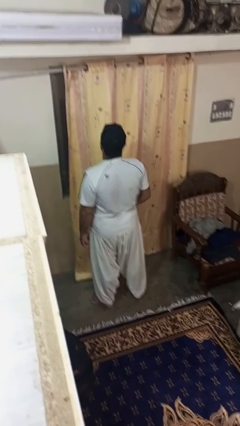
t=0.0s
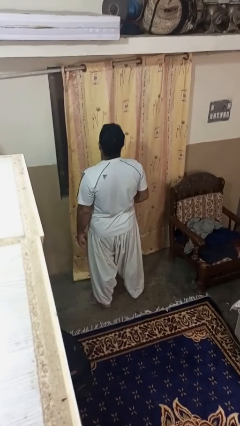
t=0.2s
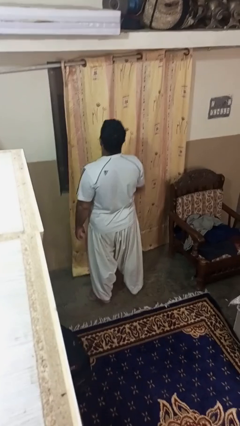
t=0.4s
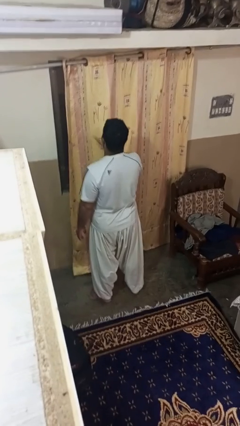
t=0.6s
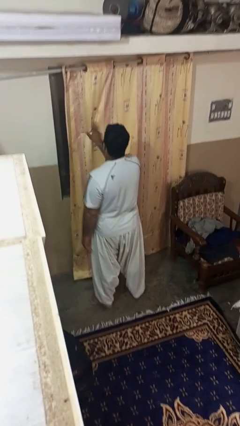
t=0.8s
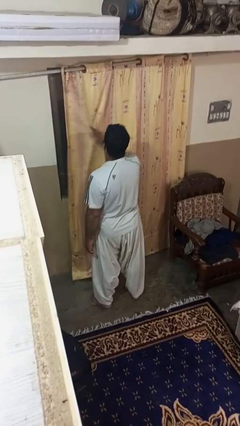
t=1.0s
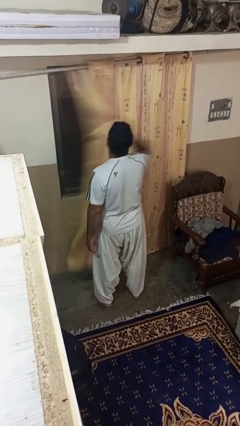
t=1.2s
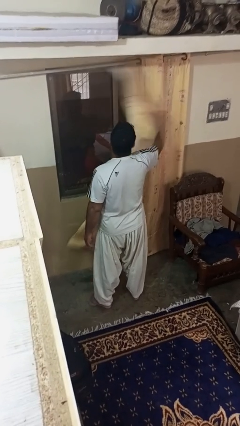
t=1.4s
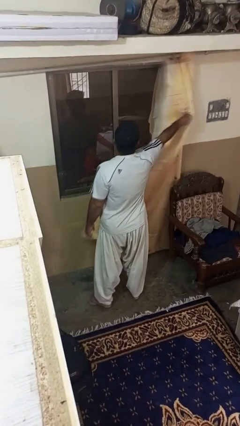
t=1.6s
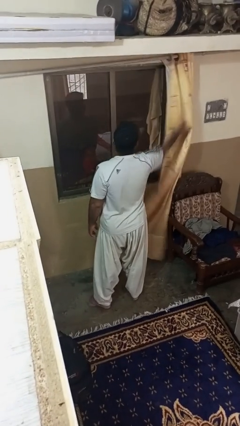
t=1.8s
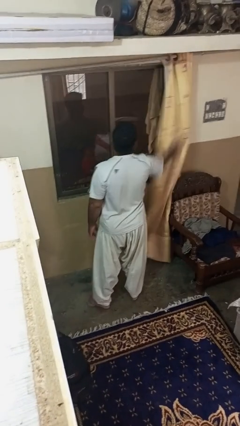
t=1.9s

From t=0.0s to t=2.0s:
person opens curtains

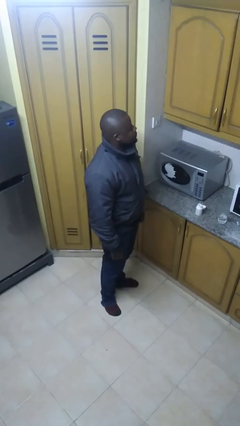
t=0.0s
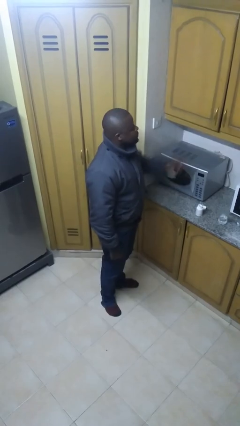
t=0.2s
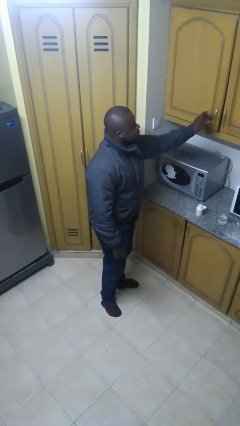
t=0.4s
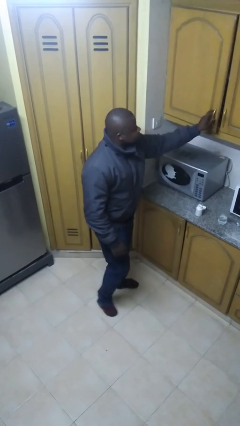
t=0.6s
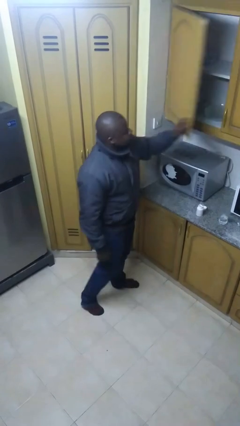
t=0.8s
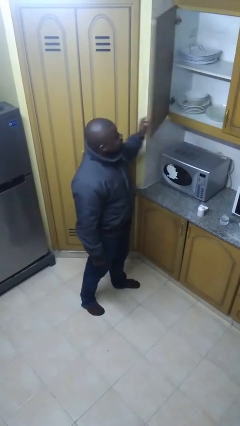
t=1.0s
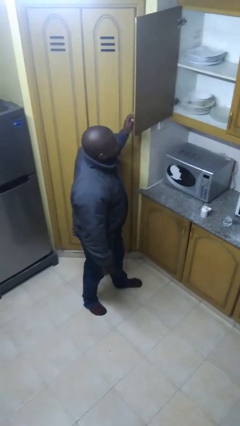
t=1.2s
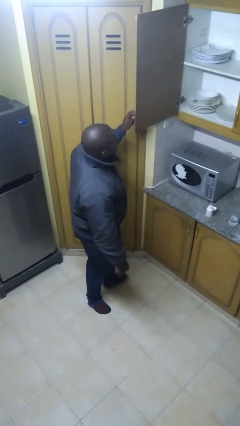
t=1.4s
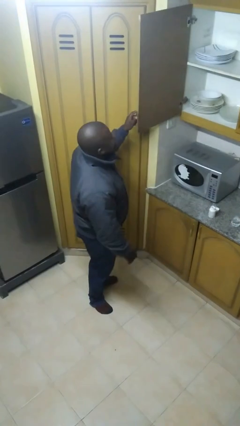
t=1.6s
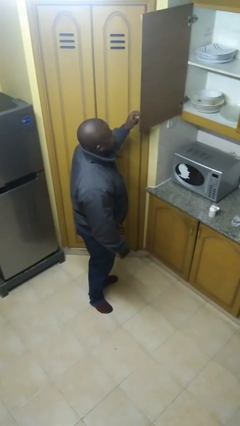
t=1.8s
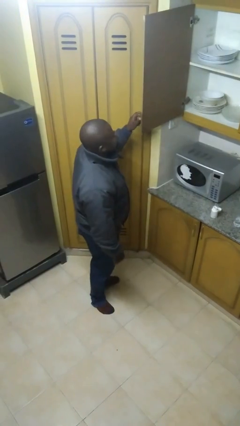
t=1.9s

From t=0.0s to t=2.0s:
person closes cabinet

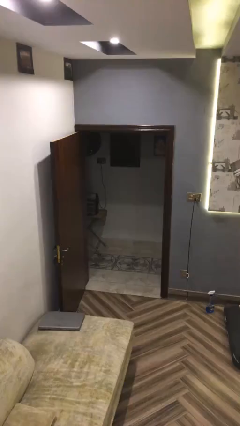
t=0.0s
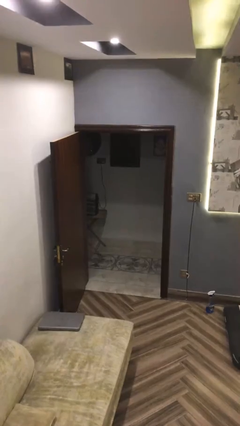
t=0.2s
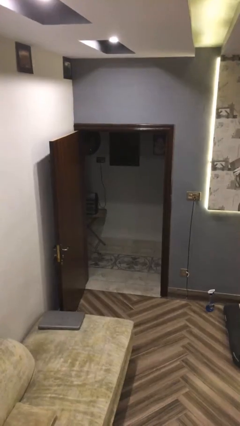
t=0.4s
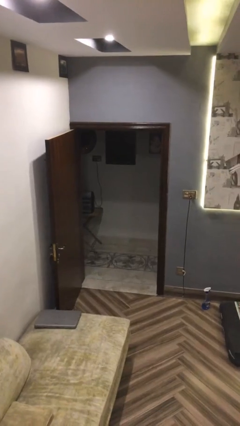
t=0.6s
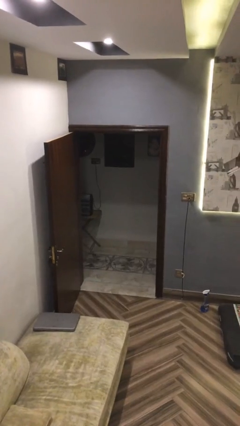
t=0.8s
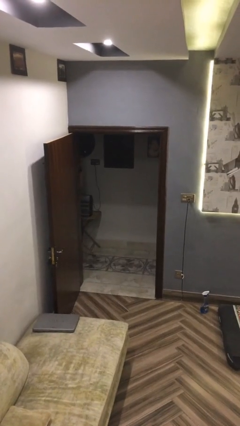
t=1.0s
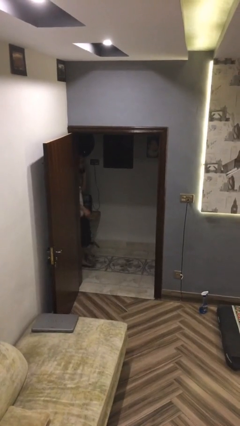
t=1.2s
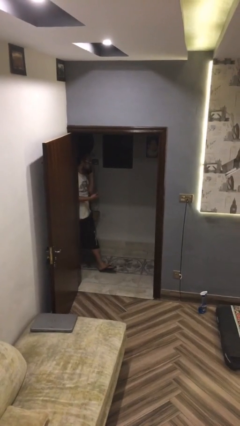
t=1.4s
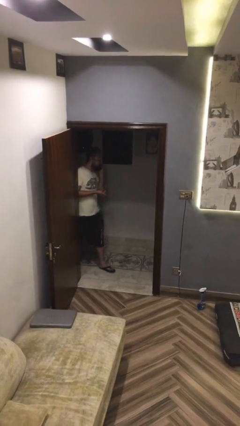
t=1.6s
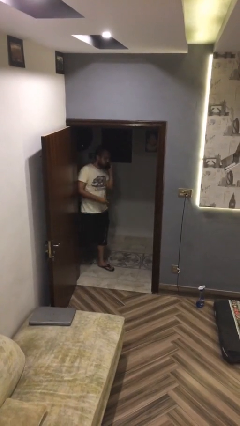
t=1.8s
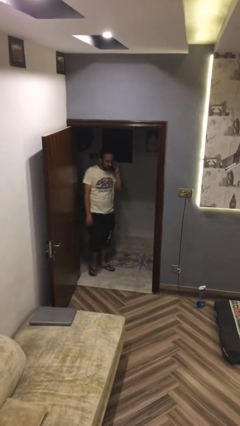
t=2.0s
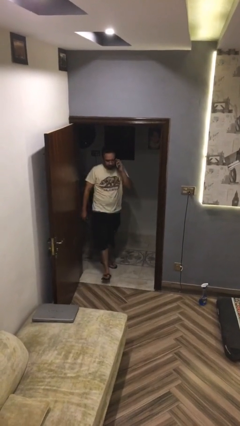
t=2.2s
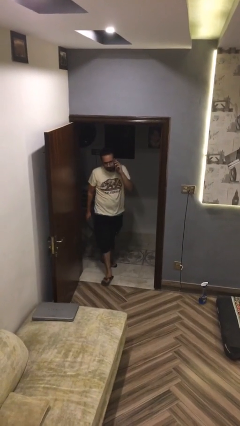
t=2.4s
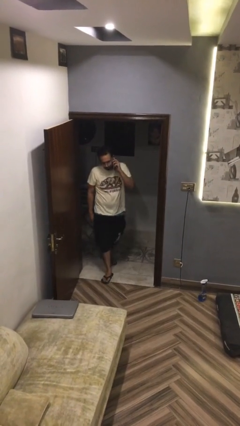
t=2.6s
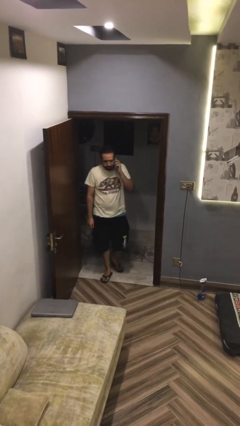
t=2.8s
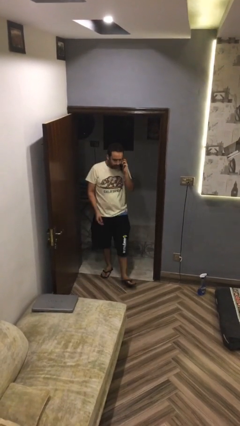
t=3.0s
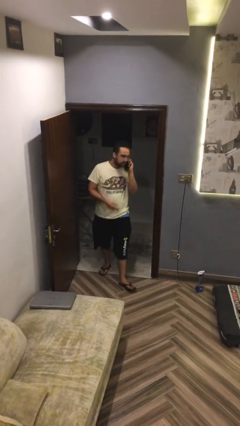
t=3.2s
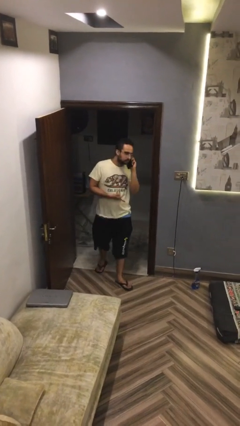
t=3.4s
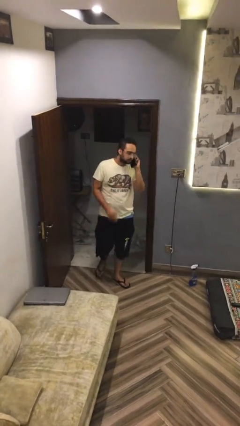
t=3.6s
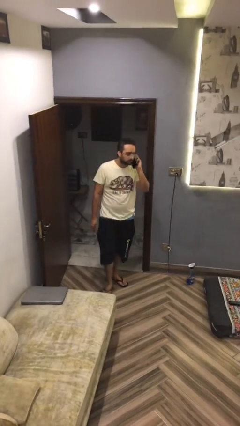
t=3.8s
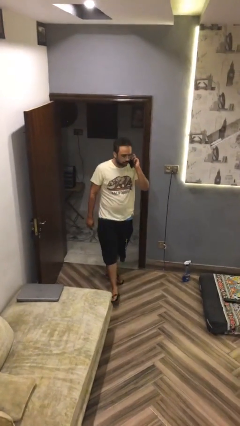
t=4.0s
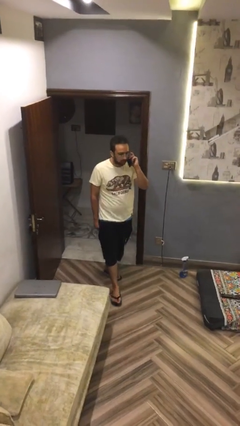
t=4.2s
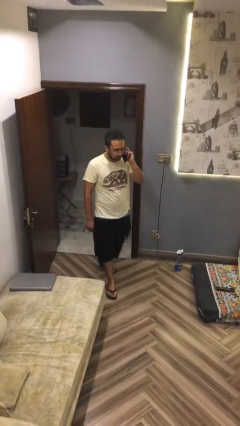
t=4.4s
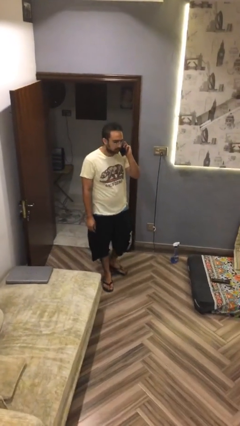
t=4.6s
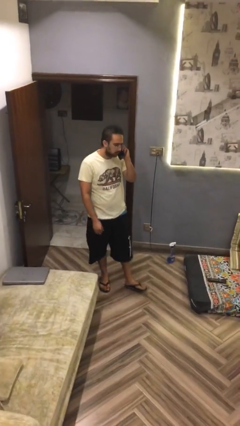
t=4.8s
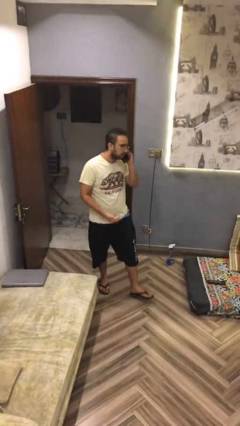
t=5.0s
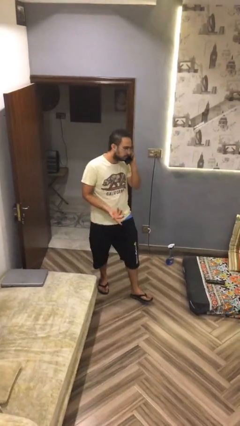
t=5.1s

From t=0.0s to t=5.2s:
person enters scene through structure

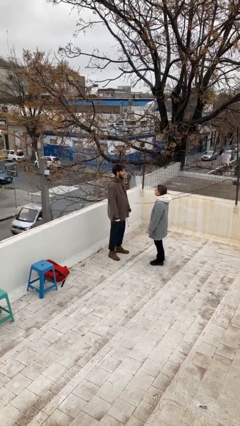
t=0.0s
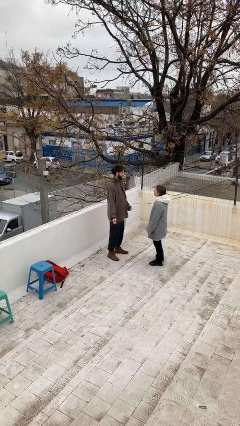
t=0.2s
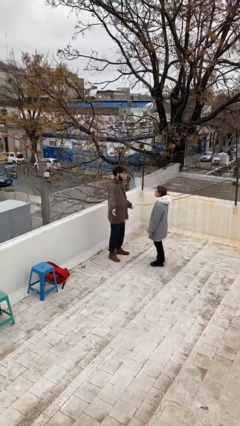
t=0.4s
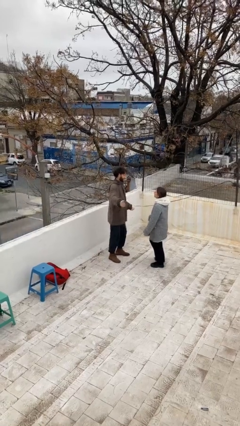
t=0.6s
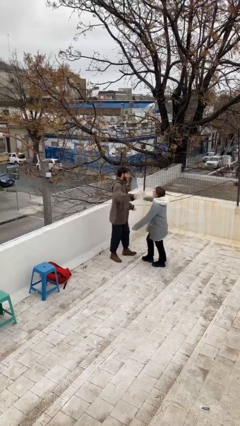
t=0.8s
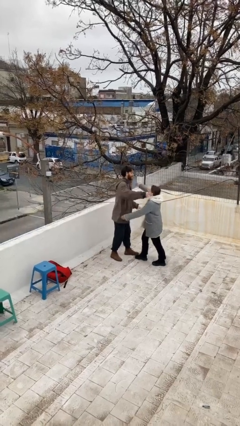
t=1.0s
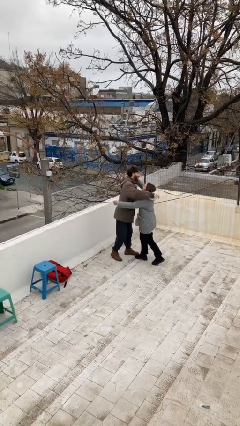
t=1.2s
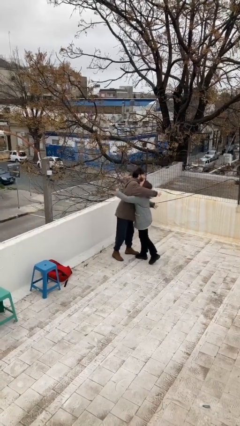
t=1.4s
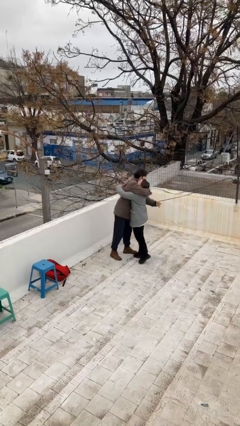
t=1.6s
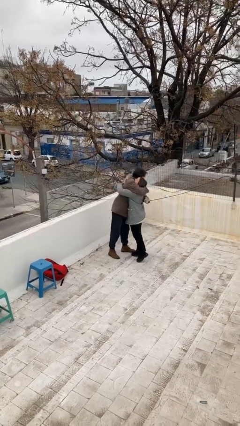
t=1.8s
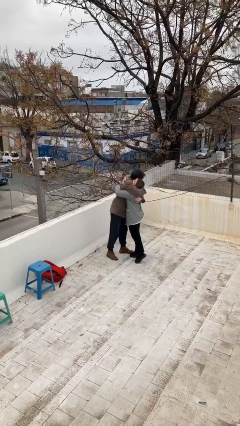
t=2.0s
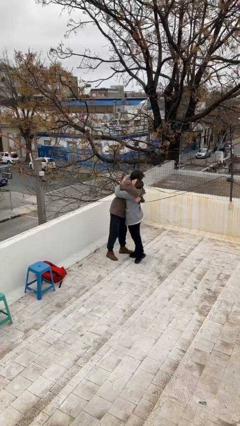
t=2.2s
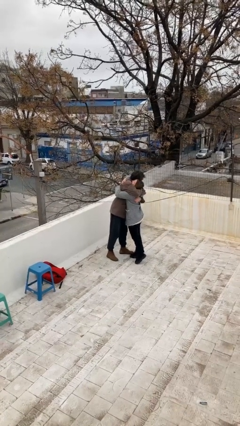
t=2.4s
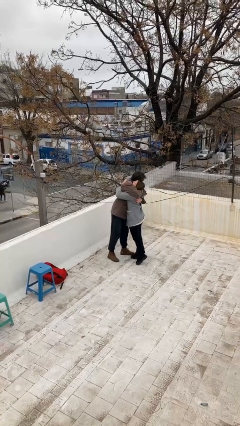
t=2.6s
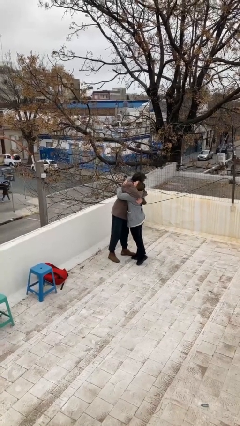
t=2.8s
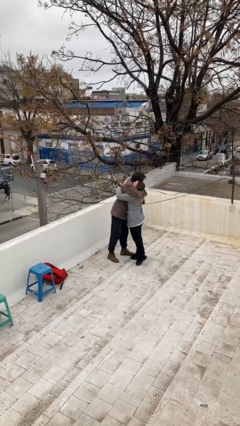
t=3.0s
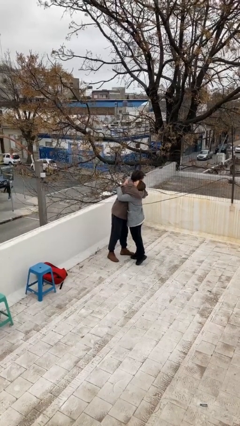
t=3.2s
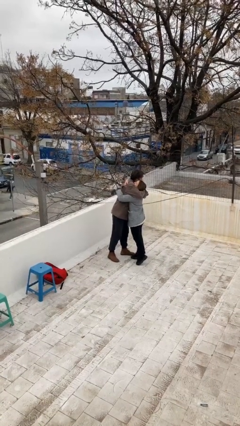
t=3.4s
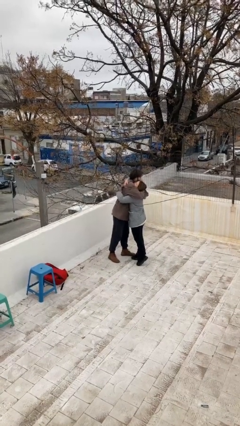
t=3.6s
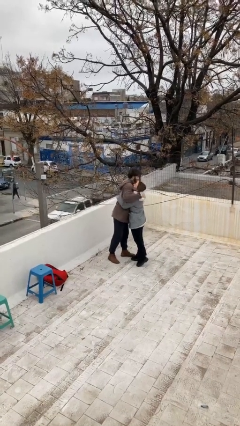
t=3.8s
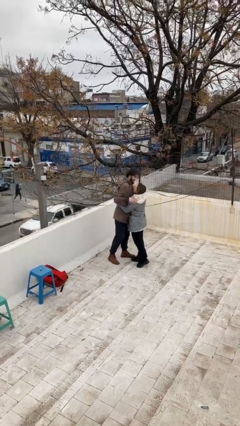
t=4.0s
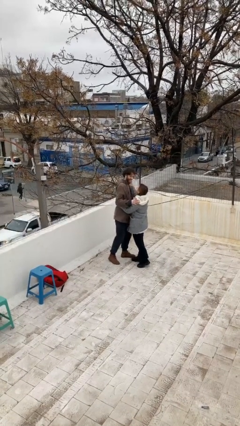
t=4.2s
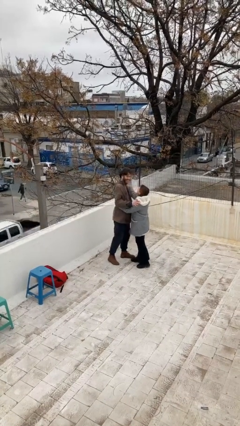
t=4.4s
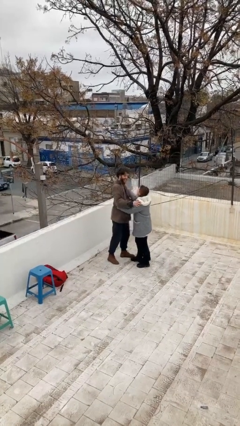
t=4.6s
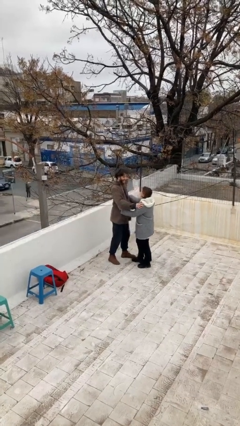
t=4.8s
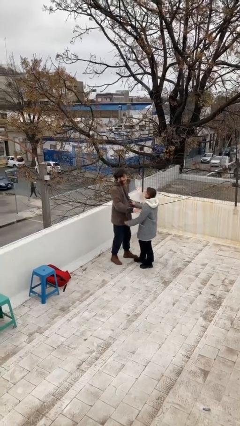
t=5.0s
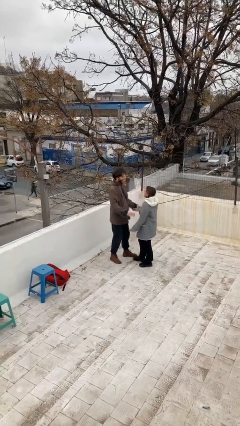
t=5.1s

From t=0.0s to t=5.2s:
person embraces person

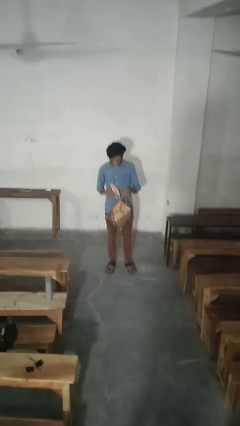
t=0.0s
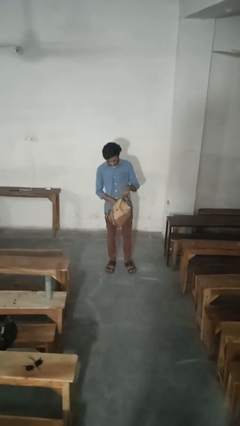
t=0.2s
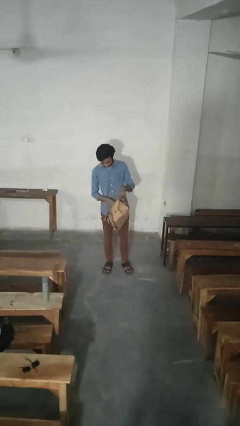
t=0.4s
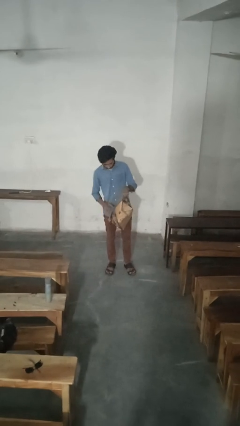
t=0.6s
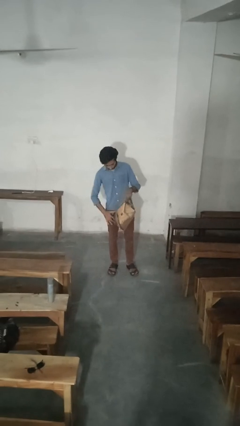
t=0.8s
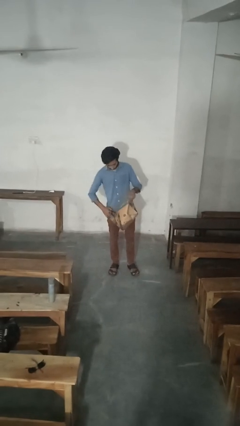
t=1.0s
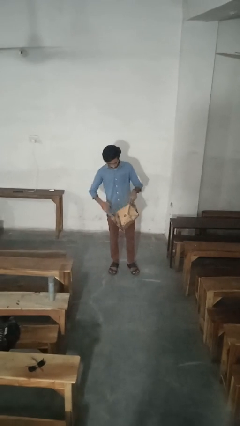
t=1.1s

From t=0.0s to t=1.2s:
person puts object into purse

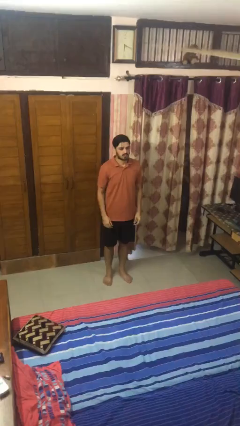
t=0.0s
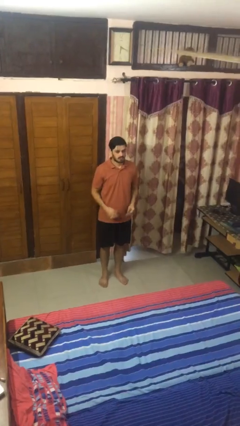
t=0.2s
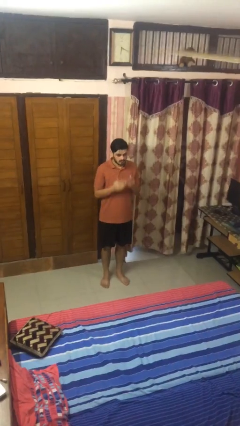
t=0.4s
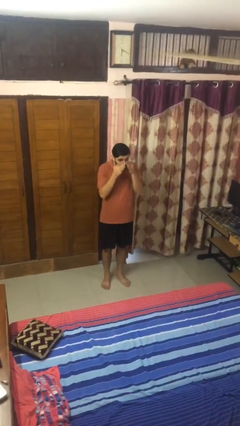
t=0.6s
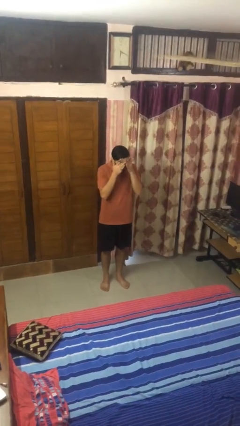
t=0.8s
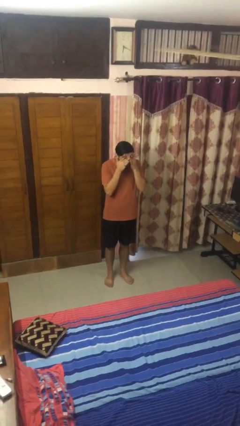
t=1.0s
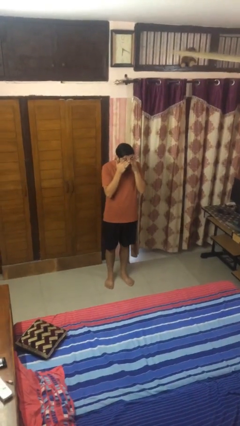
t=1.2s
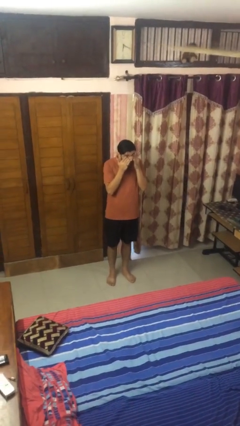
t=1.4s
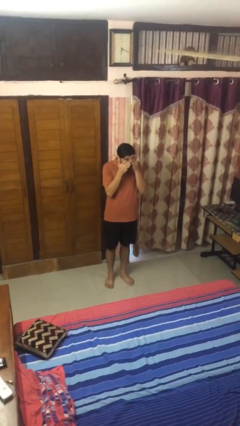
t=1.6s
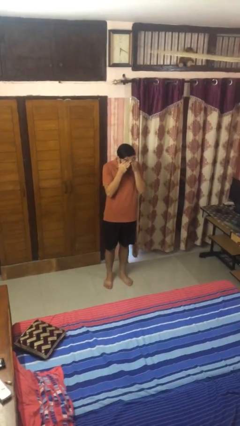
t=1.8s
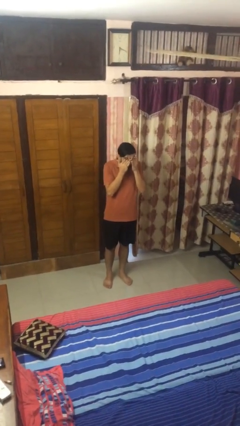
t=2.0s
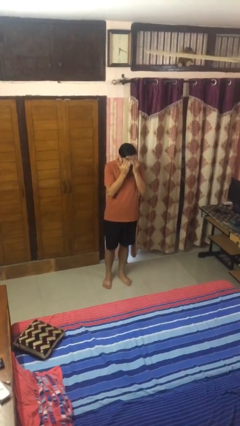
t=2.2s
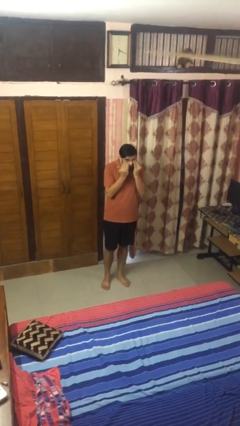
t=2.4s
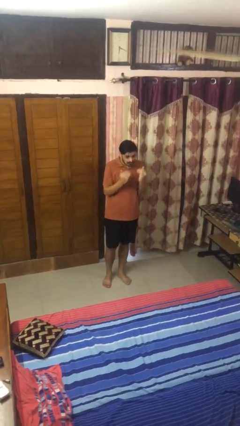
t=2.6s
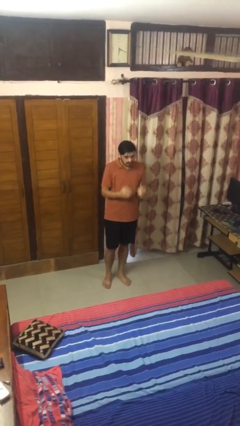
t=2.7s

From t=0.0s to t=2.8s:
person rubs eyes
